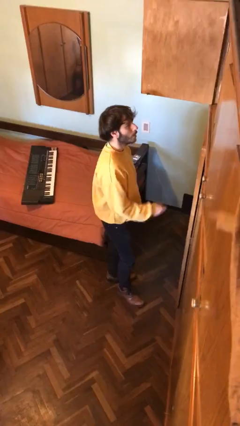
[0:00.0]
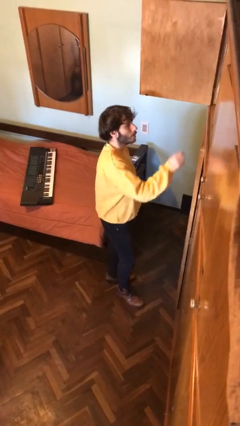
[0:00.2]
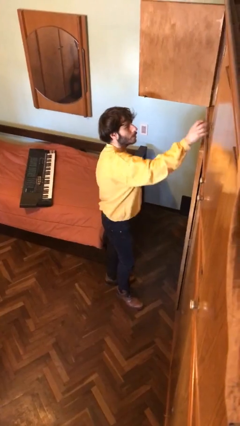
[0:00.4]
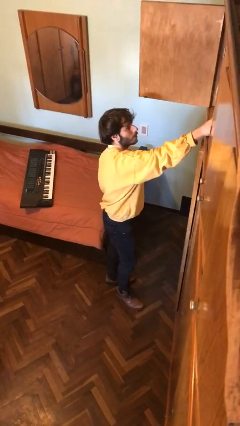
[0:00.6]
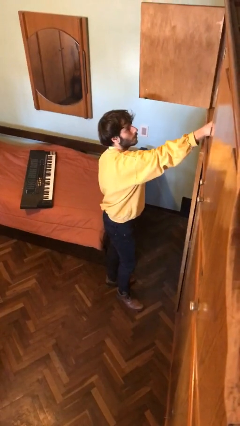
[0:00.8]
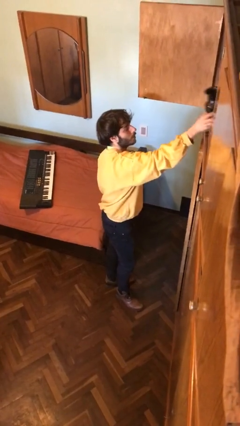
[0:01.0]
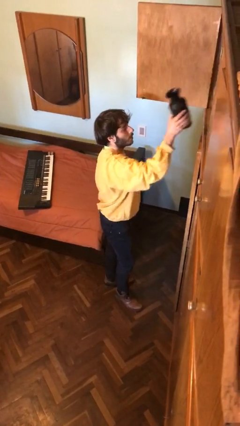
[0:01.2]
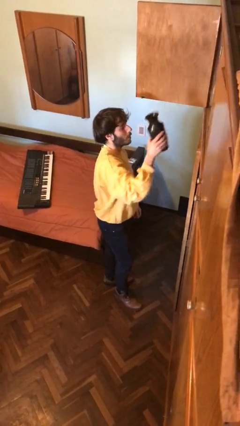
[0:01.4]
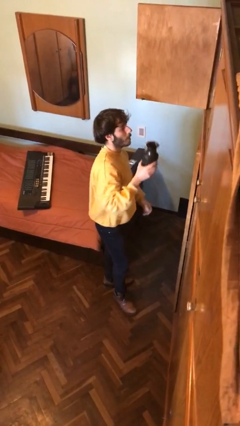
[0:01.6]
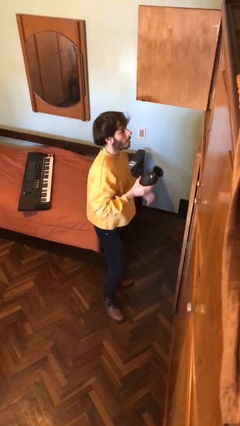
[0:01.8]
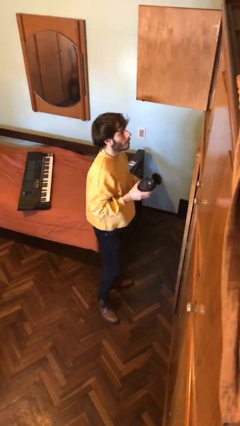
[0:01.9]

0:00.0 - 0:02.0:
person picks up object from cabinet

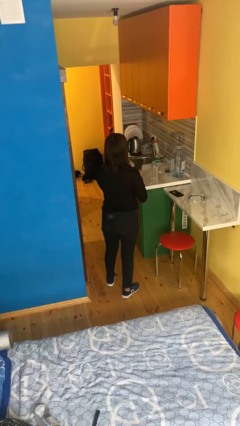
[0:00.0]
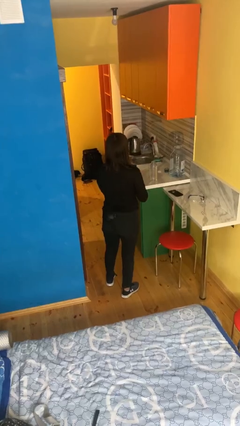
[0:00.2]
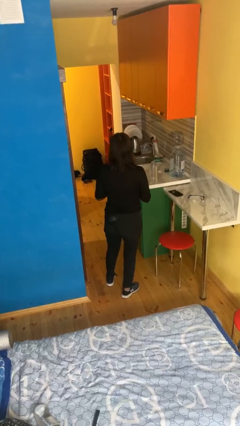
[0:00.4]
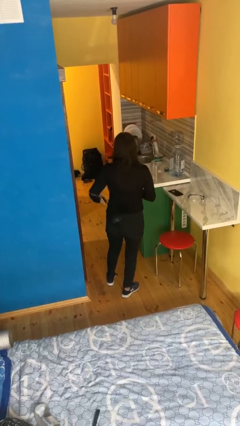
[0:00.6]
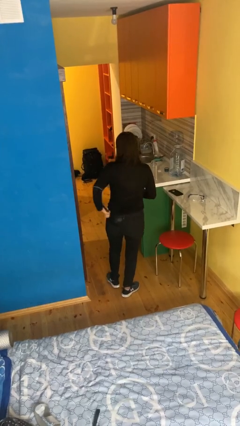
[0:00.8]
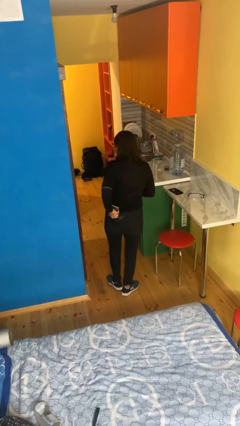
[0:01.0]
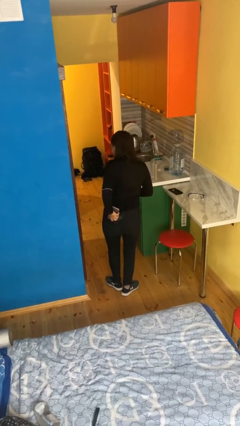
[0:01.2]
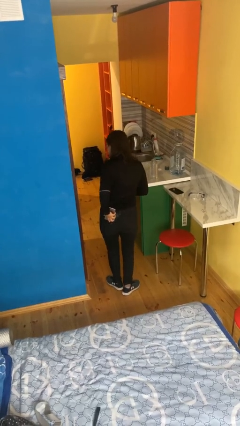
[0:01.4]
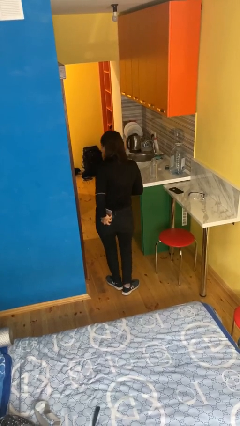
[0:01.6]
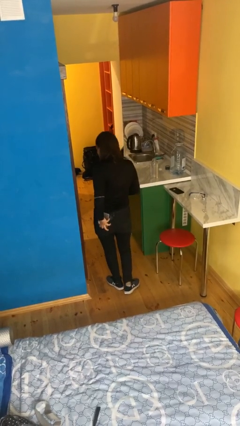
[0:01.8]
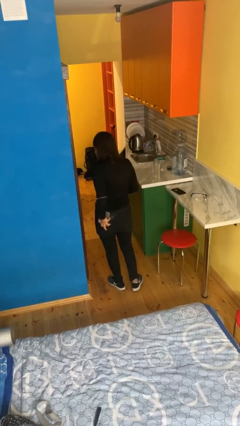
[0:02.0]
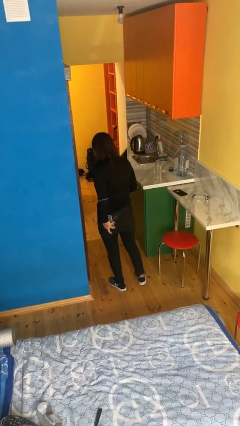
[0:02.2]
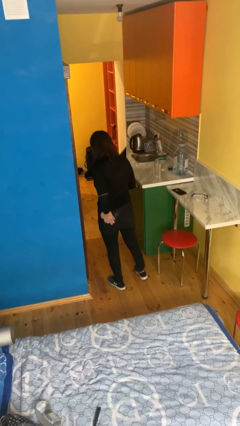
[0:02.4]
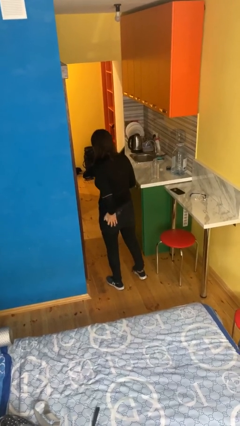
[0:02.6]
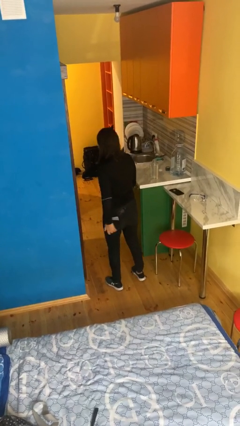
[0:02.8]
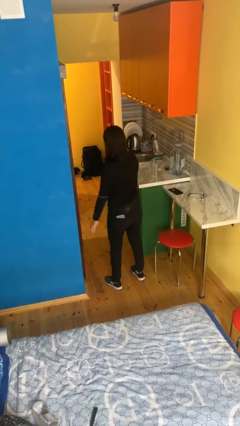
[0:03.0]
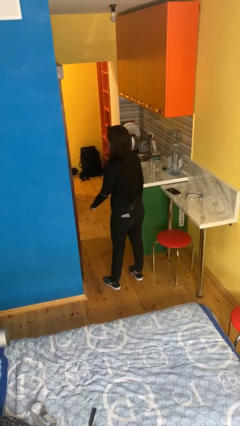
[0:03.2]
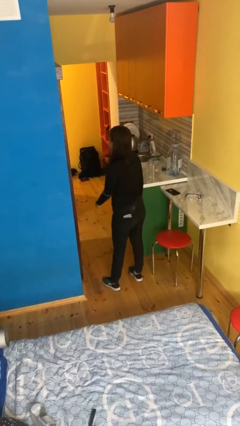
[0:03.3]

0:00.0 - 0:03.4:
person puts phone into pocket

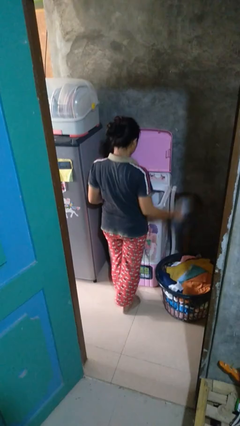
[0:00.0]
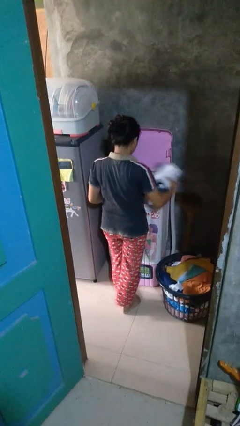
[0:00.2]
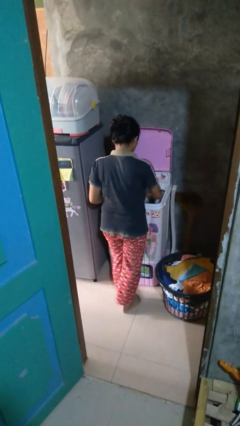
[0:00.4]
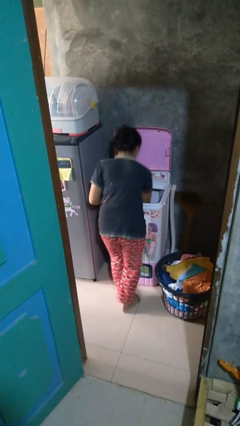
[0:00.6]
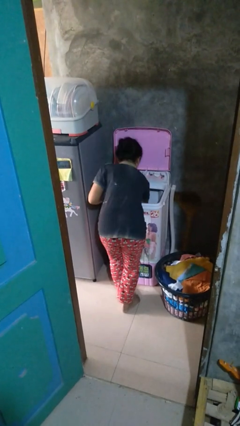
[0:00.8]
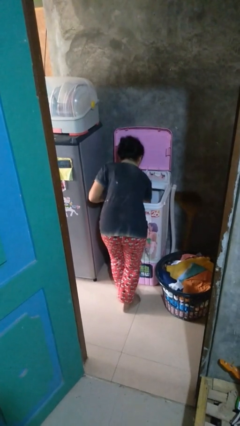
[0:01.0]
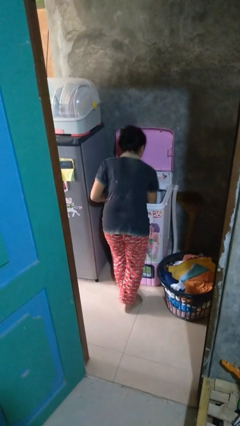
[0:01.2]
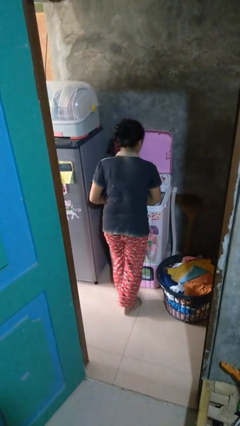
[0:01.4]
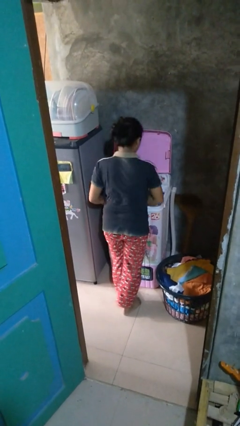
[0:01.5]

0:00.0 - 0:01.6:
person loads clotheswasher

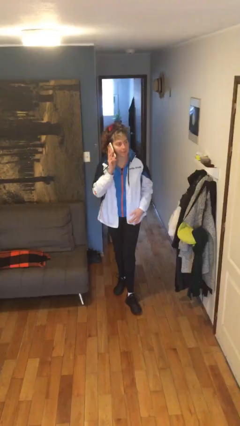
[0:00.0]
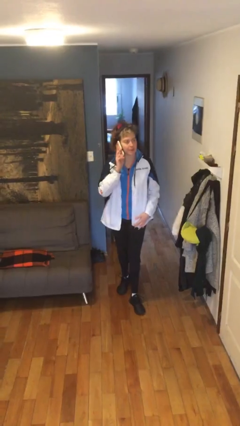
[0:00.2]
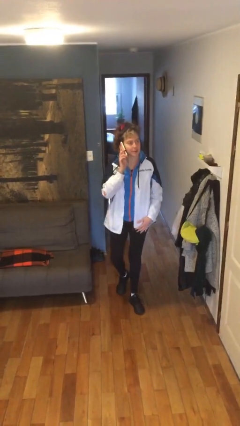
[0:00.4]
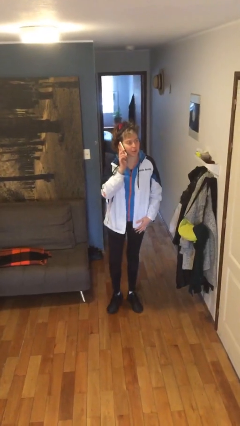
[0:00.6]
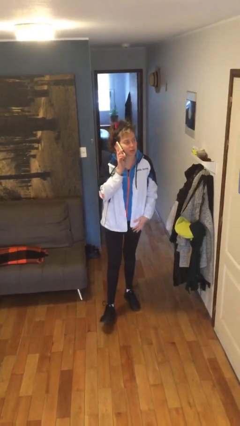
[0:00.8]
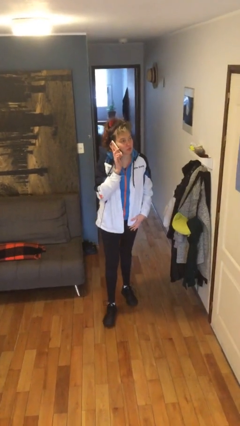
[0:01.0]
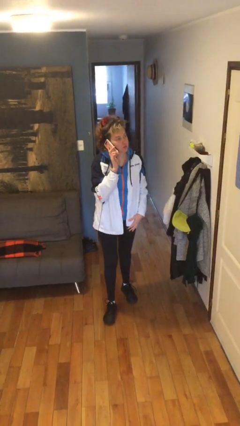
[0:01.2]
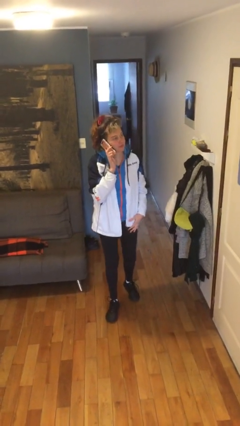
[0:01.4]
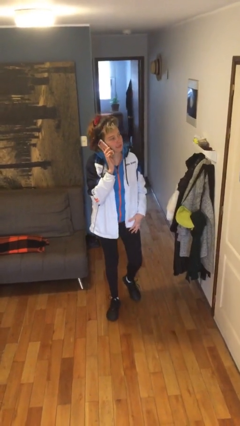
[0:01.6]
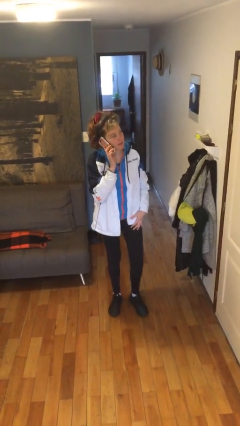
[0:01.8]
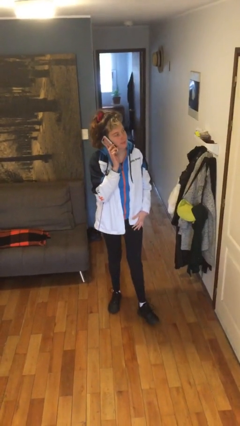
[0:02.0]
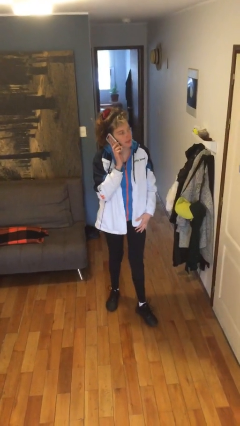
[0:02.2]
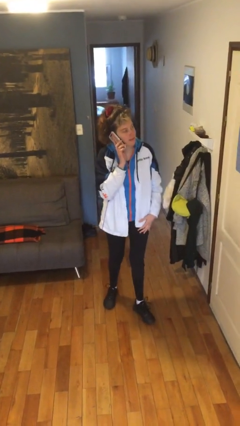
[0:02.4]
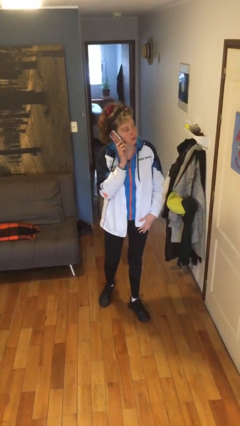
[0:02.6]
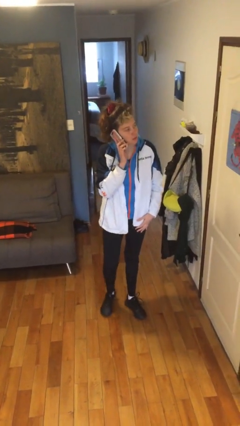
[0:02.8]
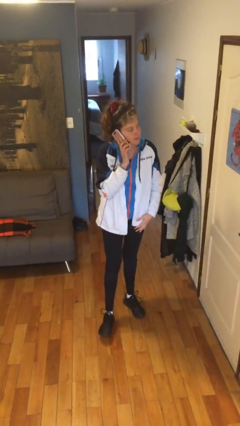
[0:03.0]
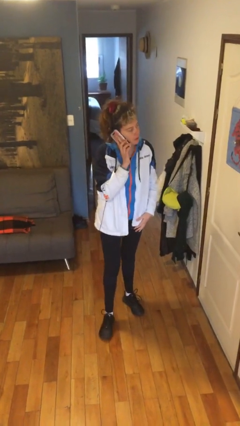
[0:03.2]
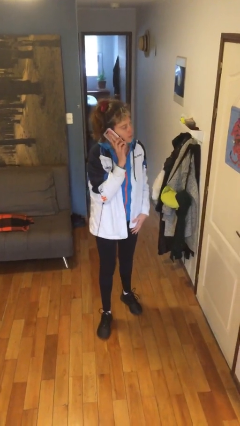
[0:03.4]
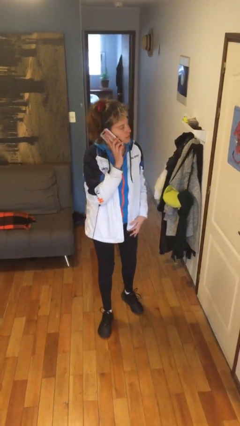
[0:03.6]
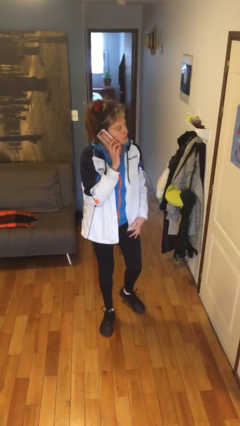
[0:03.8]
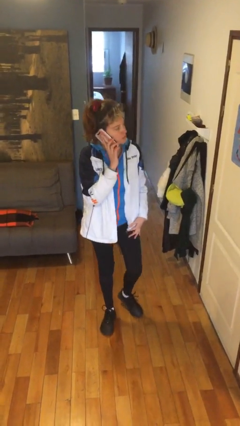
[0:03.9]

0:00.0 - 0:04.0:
person talks on phone

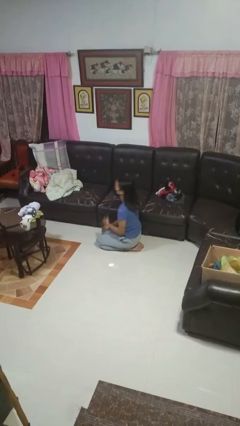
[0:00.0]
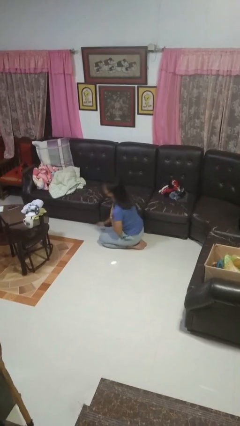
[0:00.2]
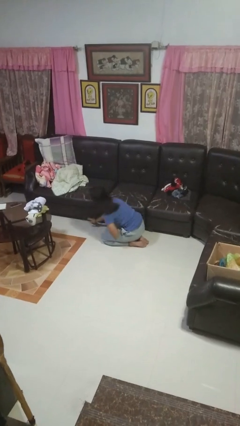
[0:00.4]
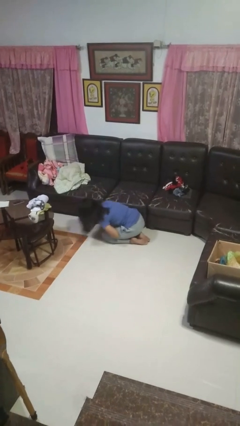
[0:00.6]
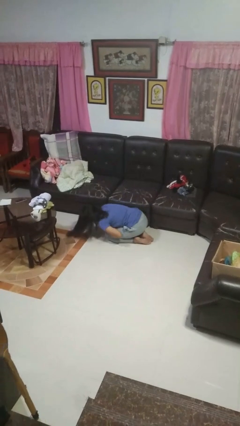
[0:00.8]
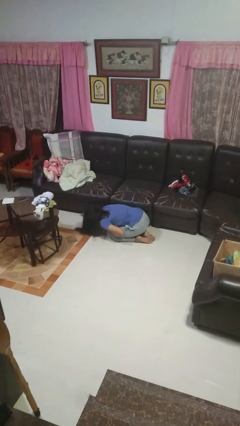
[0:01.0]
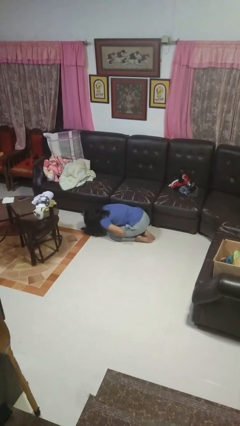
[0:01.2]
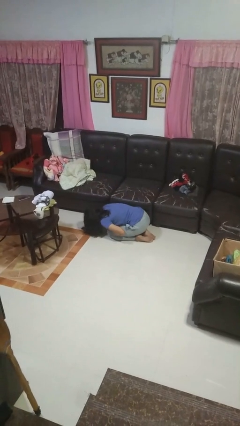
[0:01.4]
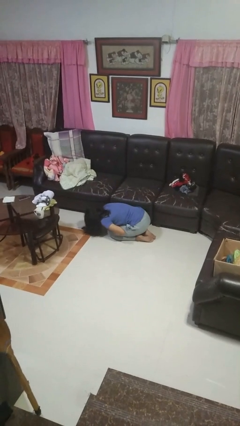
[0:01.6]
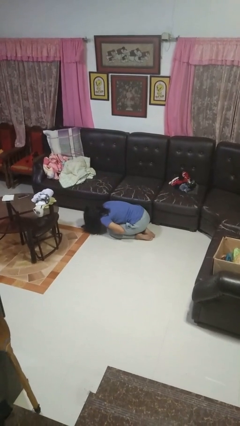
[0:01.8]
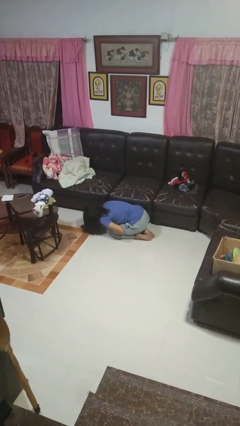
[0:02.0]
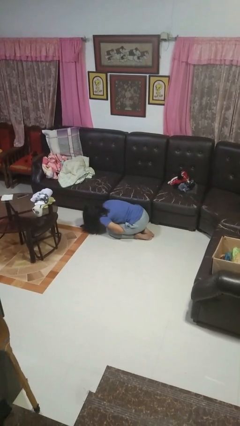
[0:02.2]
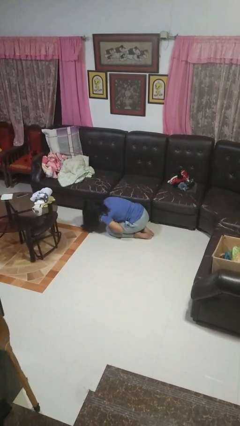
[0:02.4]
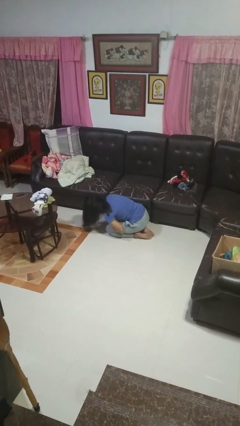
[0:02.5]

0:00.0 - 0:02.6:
person searches under couch

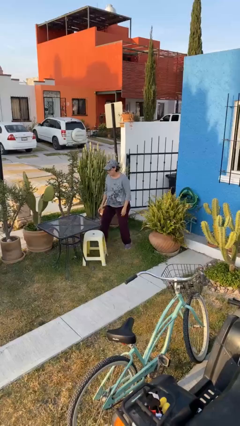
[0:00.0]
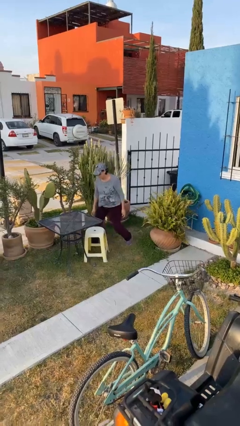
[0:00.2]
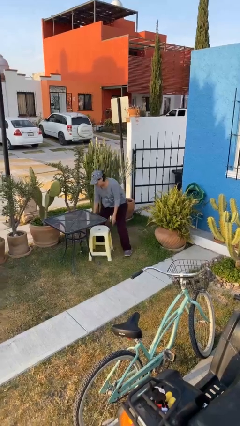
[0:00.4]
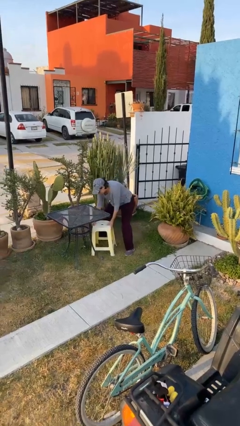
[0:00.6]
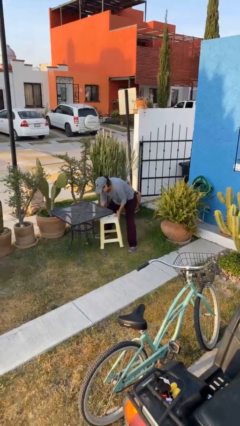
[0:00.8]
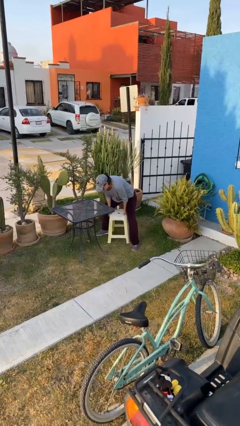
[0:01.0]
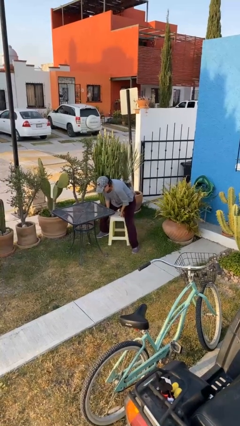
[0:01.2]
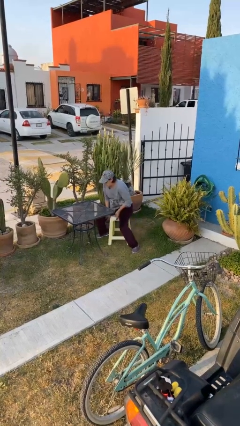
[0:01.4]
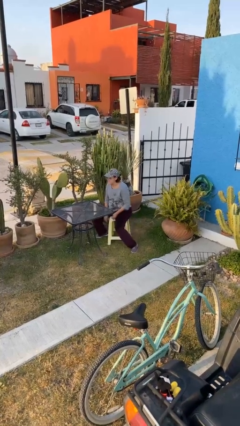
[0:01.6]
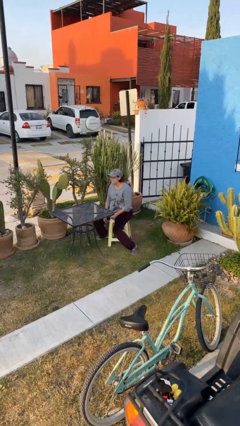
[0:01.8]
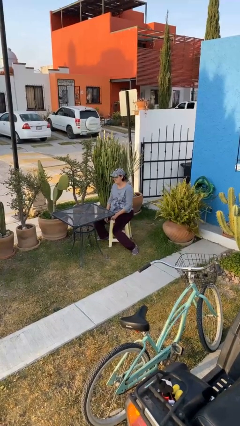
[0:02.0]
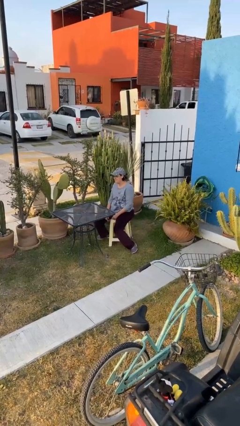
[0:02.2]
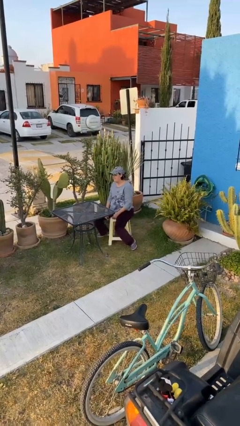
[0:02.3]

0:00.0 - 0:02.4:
person sits down

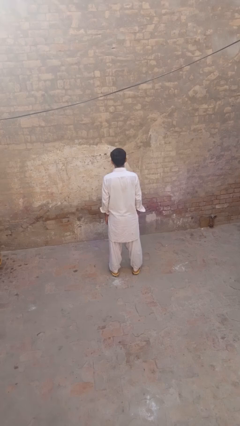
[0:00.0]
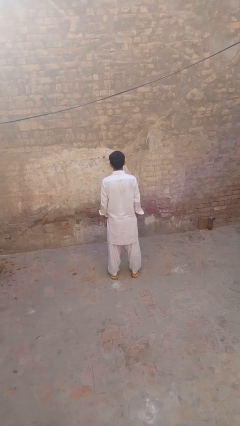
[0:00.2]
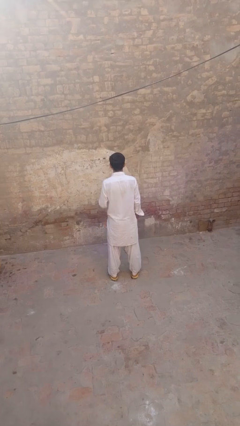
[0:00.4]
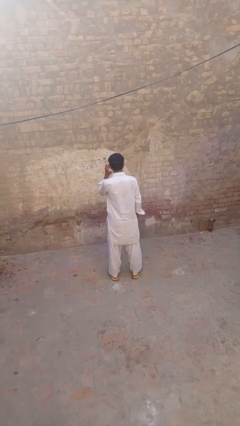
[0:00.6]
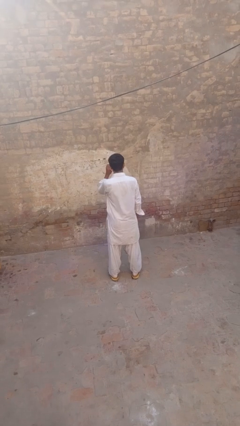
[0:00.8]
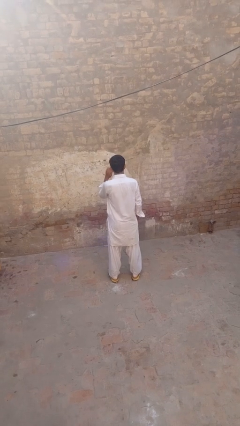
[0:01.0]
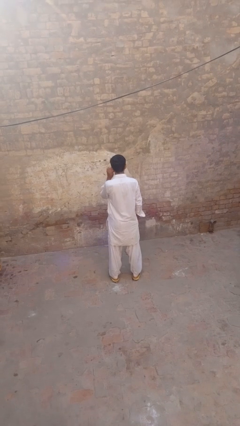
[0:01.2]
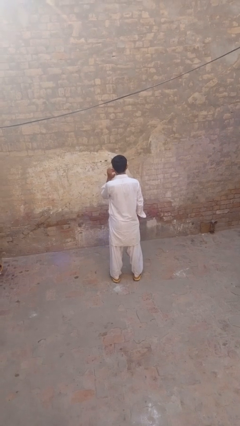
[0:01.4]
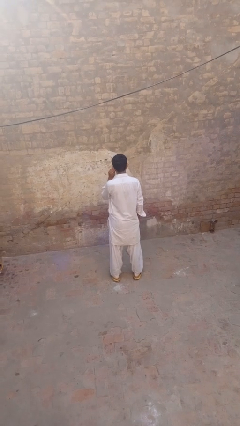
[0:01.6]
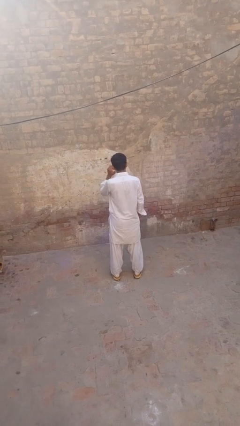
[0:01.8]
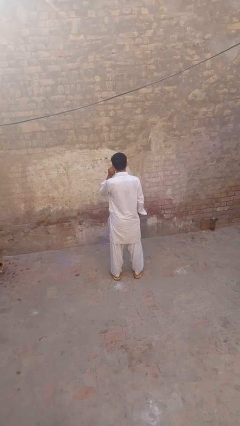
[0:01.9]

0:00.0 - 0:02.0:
person touches earlobe
